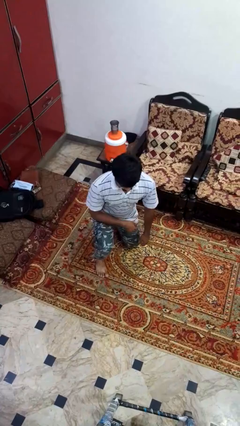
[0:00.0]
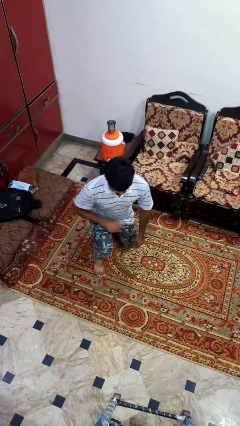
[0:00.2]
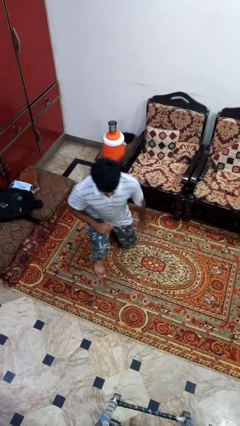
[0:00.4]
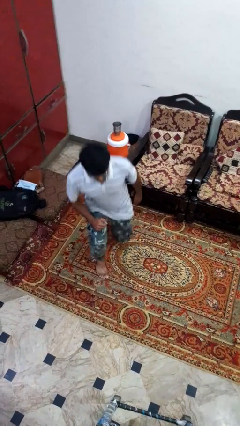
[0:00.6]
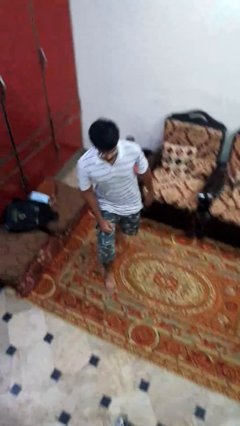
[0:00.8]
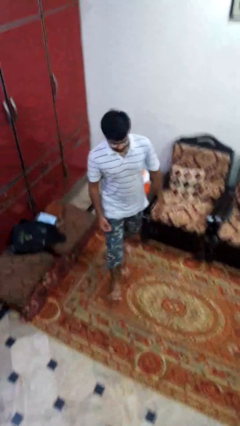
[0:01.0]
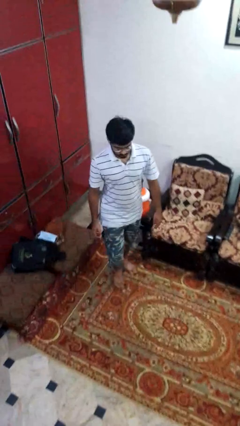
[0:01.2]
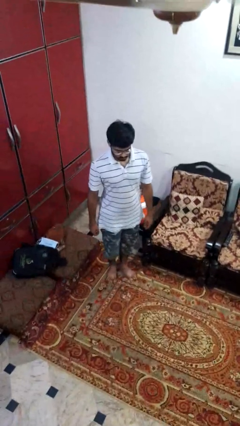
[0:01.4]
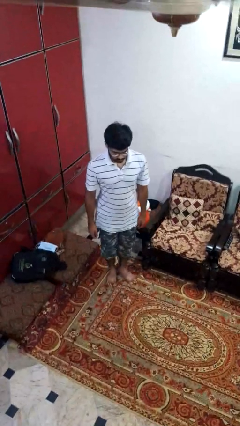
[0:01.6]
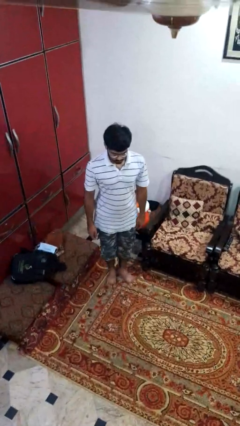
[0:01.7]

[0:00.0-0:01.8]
person stands up from floor

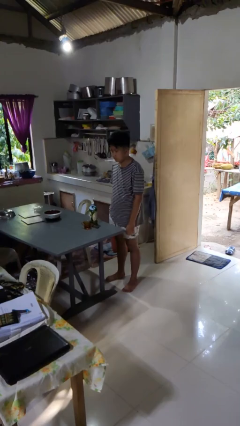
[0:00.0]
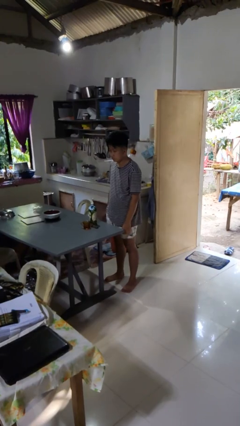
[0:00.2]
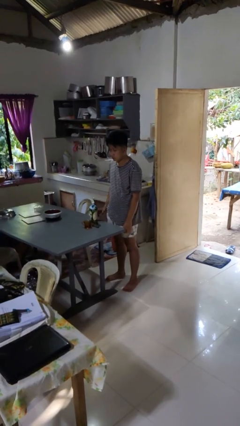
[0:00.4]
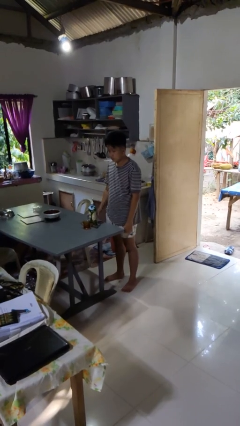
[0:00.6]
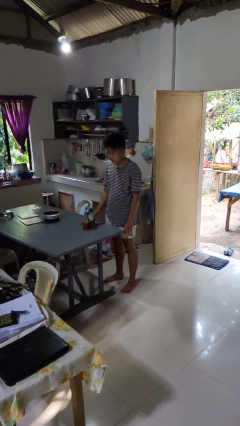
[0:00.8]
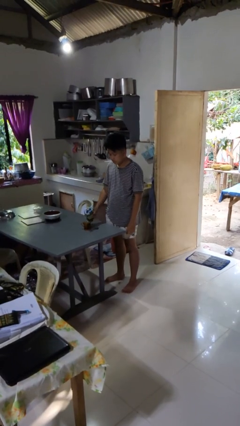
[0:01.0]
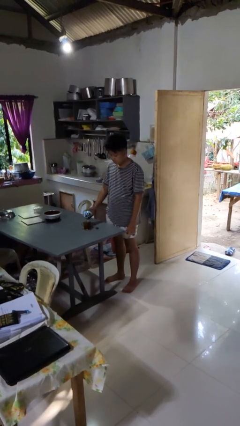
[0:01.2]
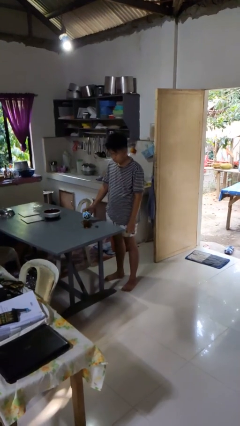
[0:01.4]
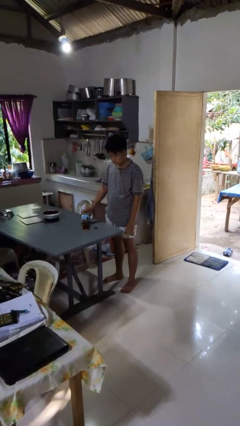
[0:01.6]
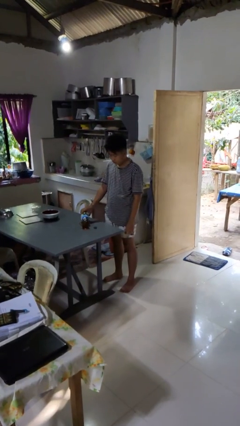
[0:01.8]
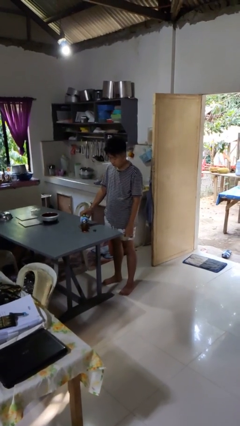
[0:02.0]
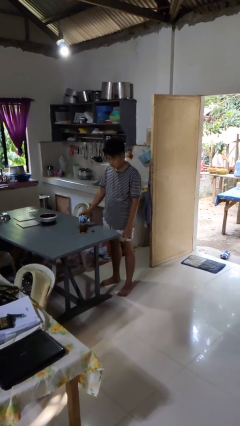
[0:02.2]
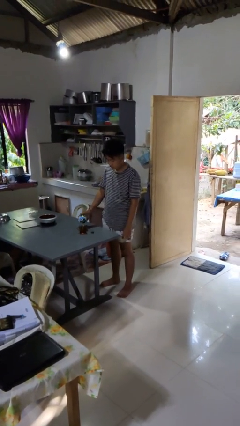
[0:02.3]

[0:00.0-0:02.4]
person pours liquid into cup

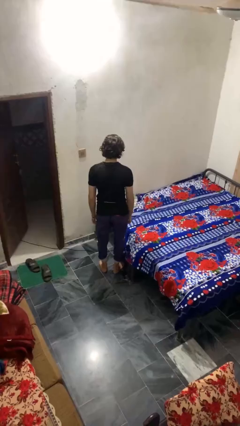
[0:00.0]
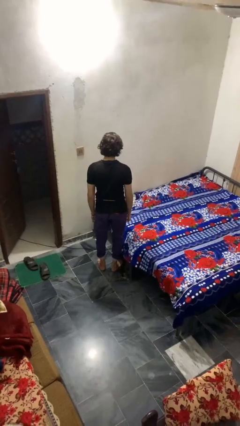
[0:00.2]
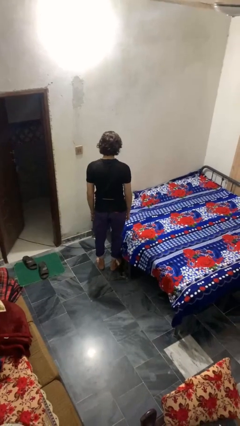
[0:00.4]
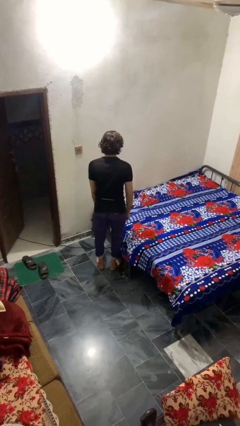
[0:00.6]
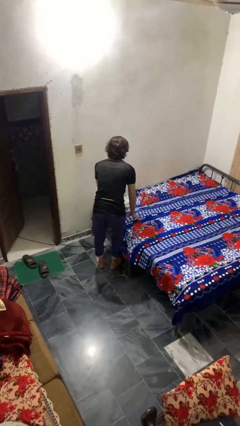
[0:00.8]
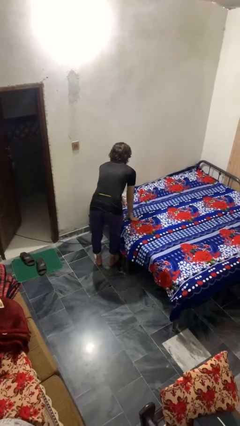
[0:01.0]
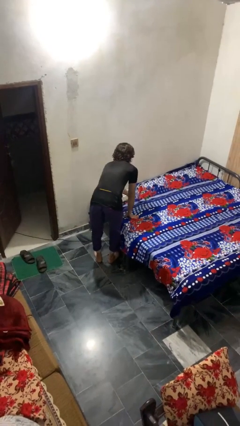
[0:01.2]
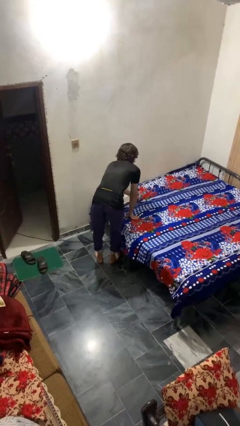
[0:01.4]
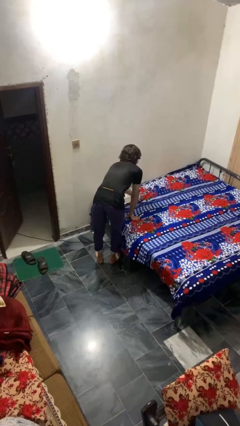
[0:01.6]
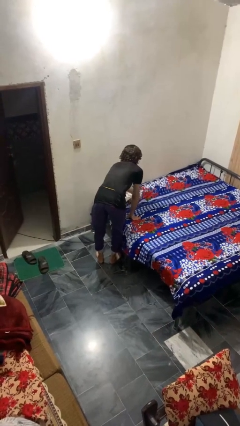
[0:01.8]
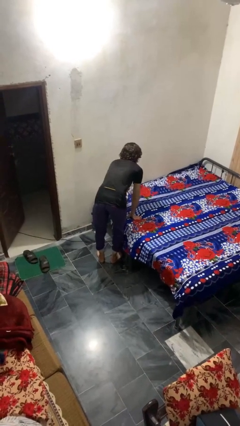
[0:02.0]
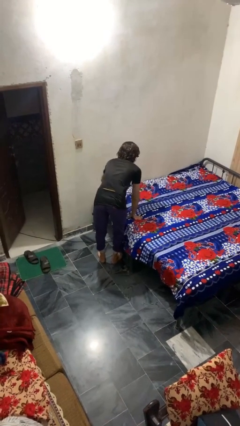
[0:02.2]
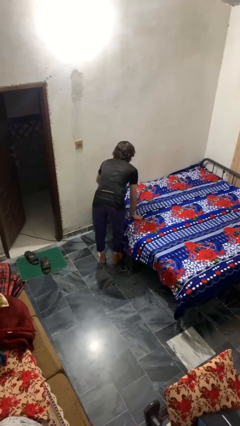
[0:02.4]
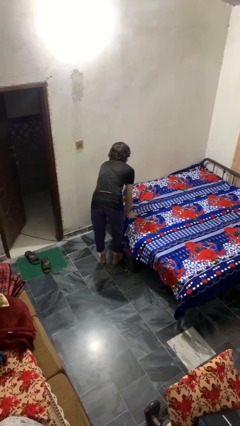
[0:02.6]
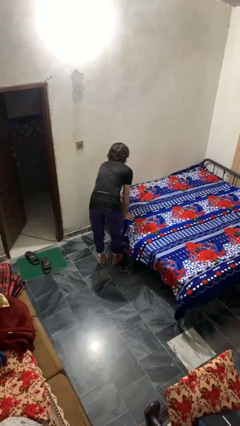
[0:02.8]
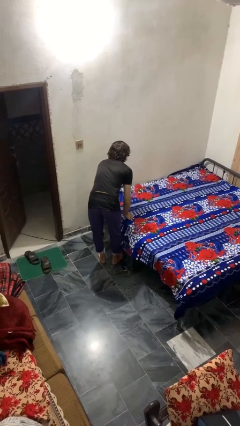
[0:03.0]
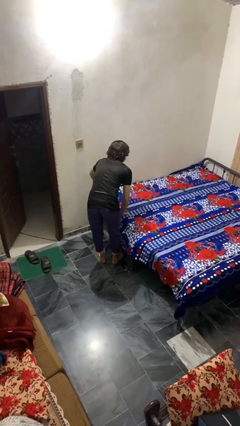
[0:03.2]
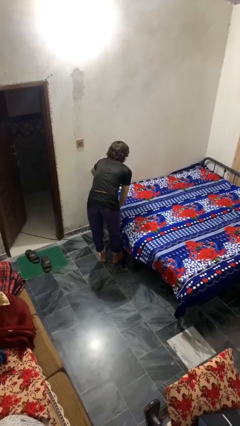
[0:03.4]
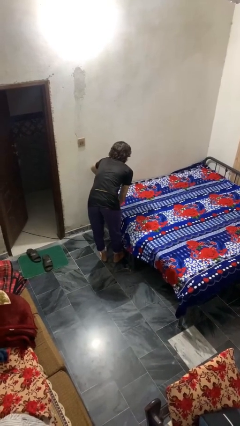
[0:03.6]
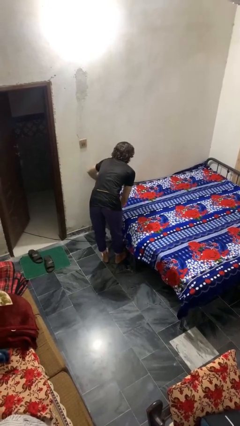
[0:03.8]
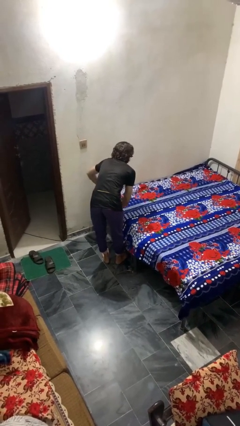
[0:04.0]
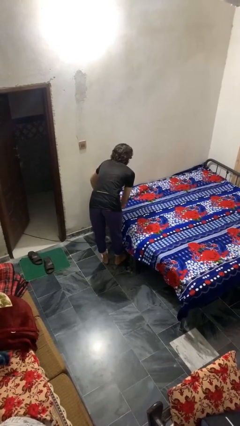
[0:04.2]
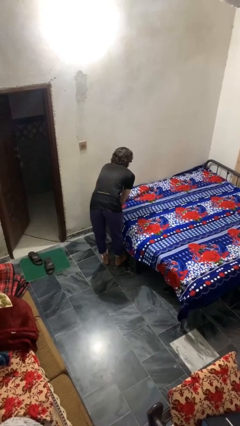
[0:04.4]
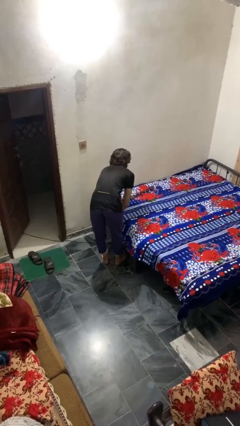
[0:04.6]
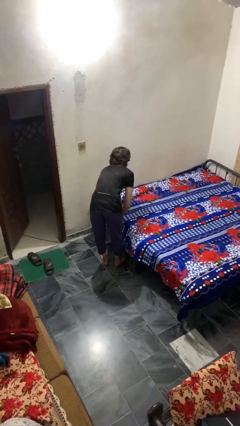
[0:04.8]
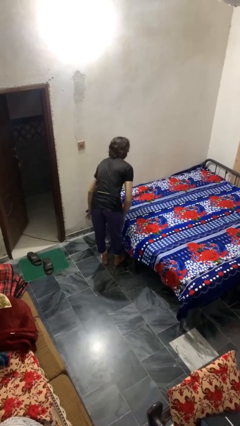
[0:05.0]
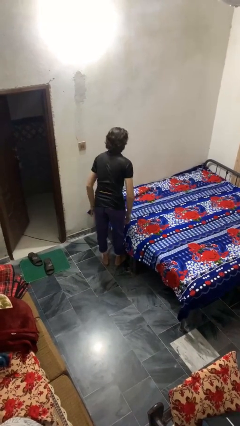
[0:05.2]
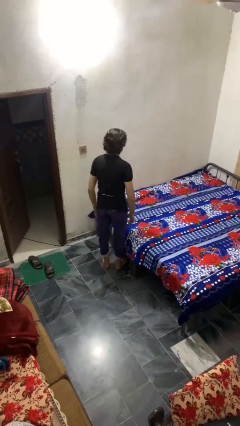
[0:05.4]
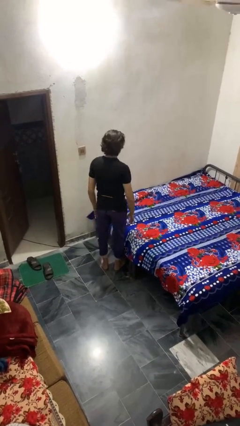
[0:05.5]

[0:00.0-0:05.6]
person makes bed

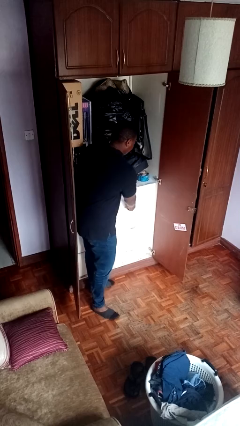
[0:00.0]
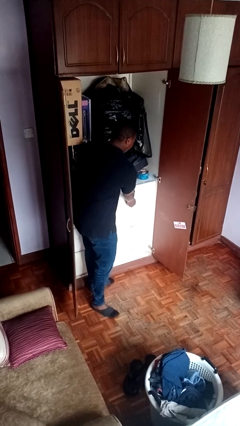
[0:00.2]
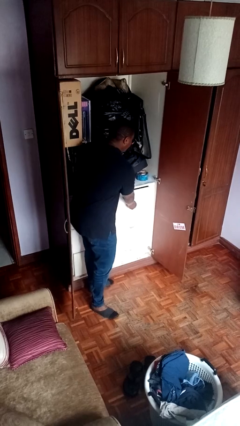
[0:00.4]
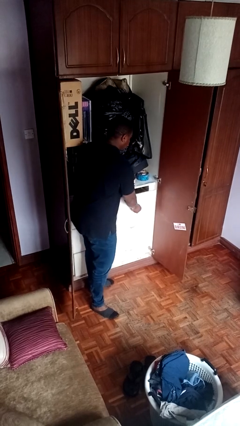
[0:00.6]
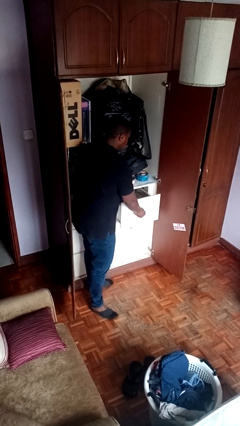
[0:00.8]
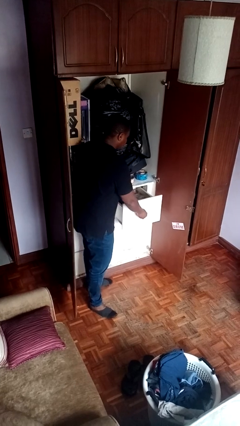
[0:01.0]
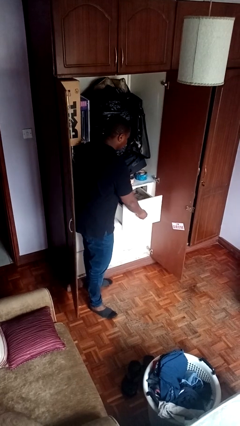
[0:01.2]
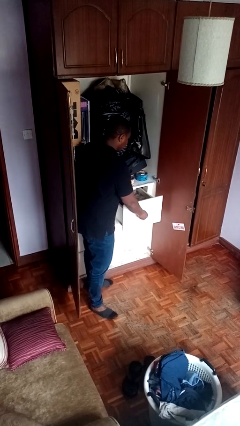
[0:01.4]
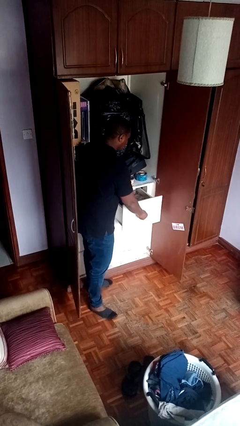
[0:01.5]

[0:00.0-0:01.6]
person opens dresser drawer

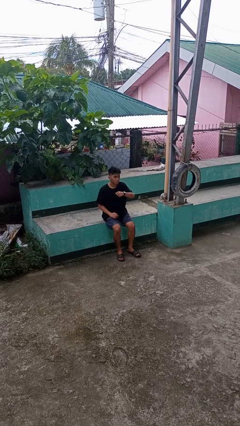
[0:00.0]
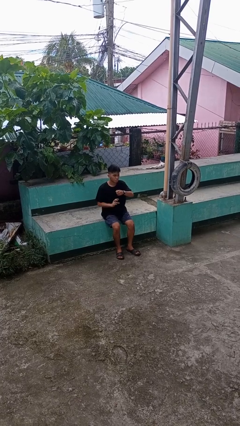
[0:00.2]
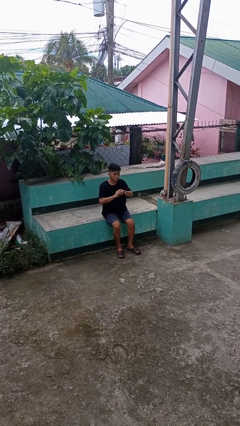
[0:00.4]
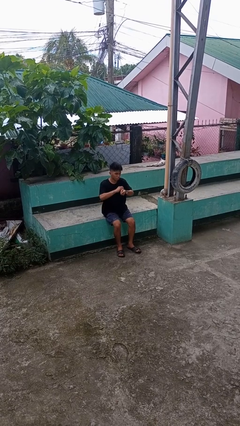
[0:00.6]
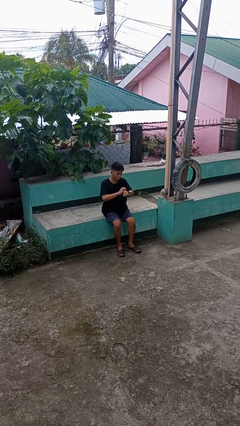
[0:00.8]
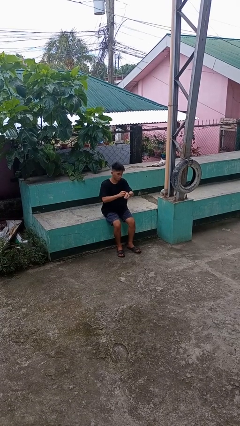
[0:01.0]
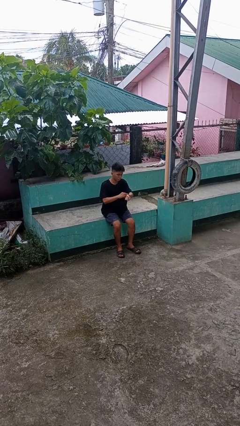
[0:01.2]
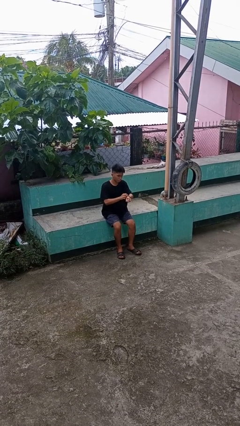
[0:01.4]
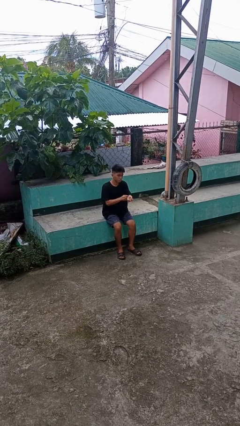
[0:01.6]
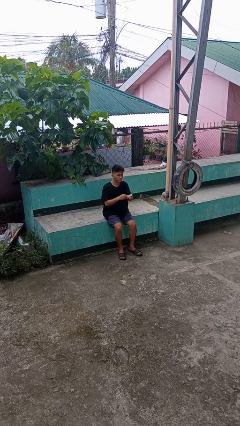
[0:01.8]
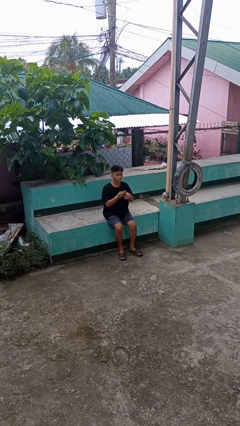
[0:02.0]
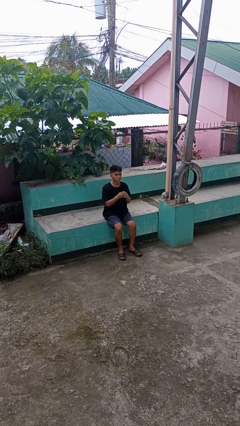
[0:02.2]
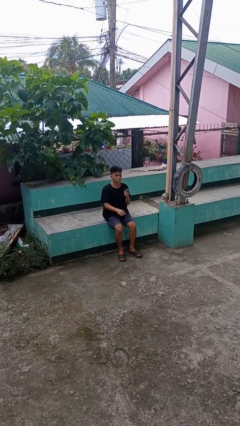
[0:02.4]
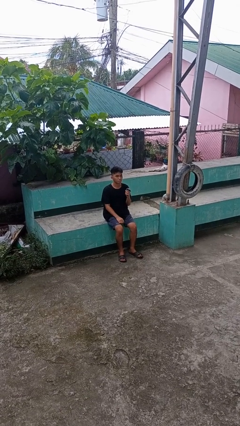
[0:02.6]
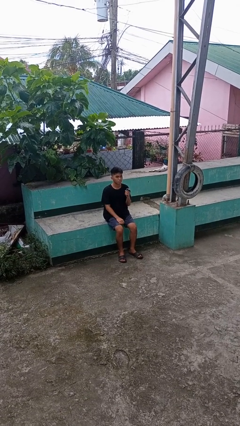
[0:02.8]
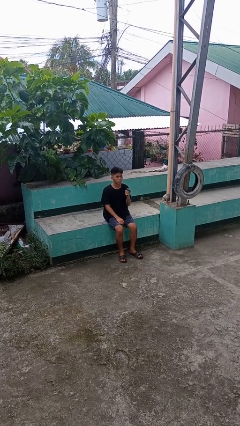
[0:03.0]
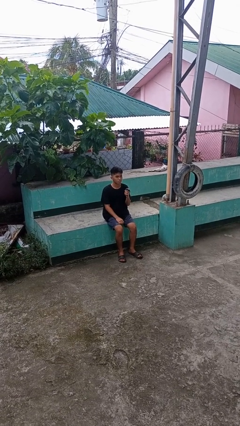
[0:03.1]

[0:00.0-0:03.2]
person takes off wristwatch

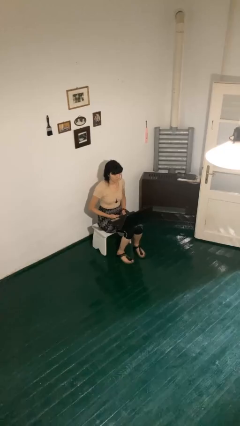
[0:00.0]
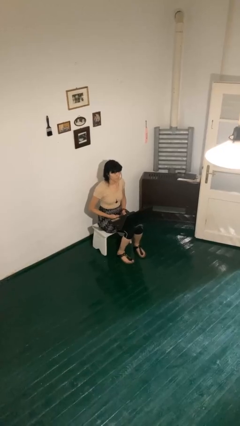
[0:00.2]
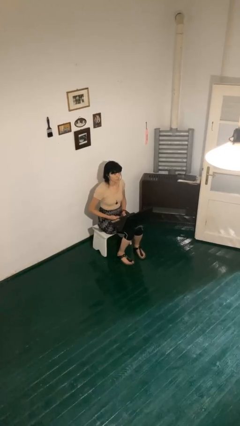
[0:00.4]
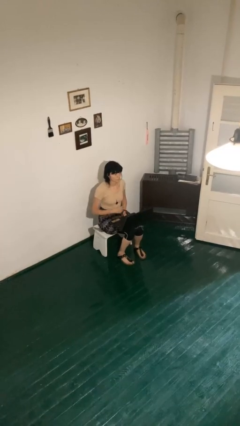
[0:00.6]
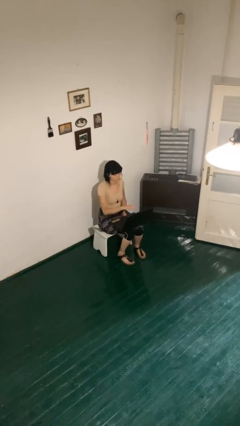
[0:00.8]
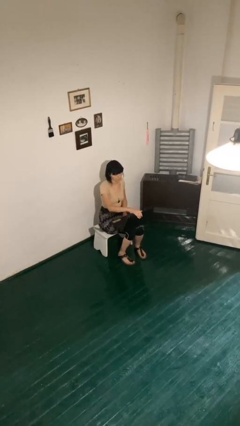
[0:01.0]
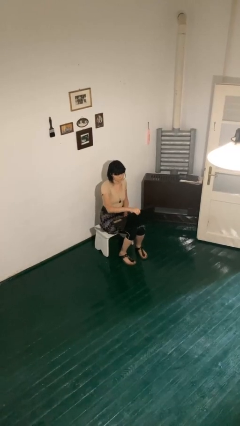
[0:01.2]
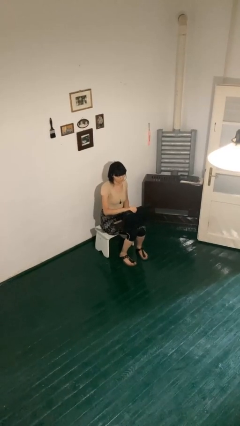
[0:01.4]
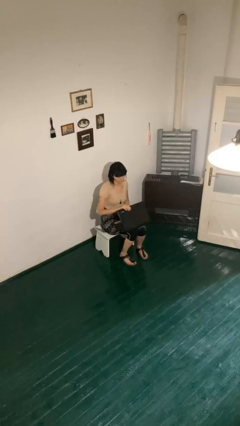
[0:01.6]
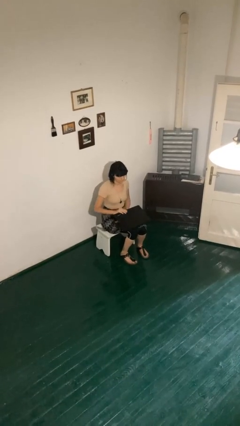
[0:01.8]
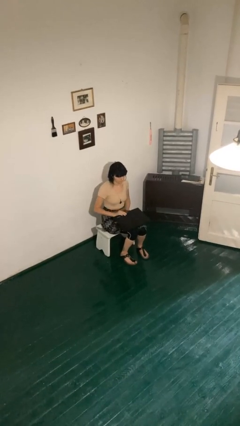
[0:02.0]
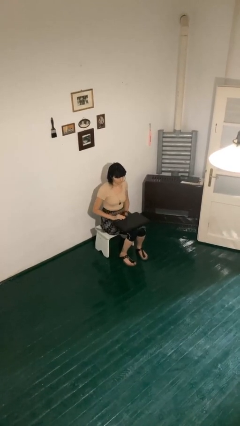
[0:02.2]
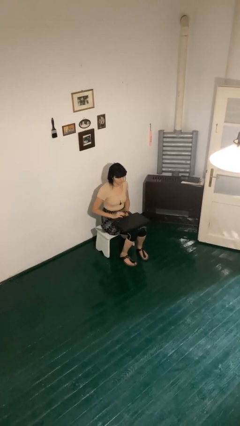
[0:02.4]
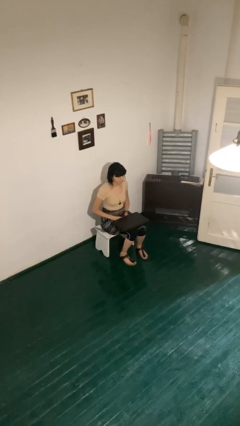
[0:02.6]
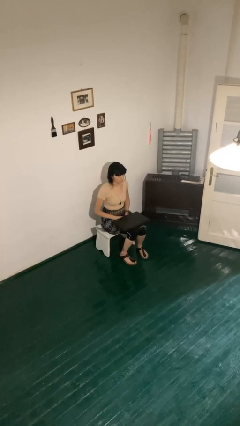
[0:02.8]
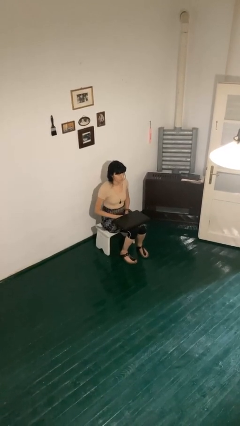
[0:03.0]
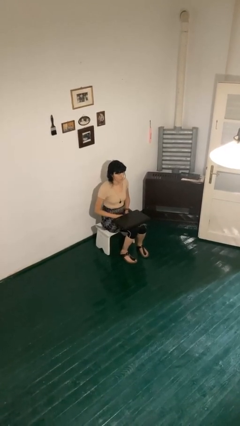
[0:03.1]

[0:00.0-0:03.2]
person closes laptop

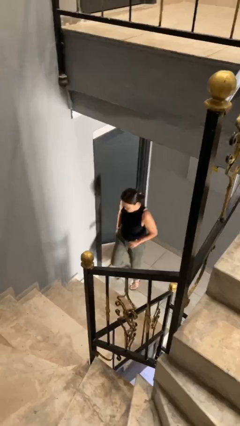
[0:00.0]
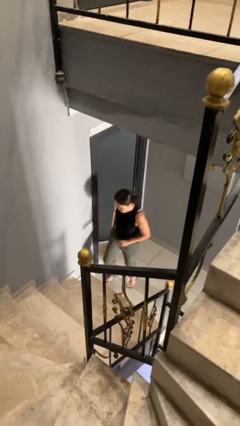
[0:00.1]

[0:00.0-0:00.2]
person climbs down stairs
